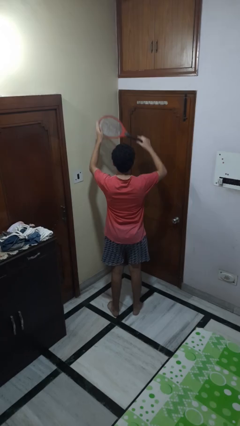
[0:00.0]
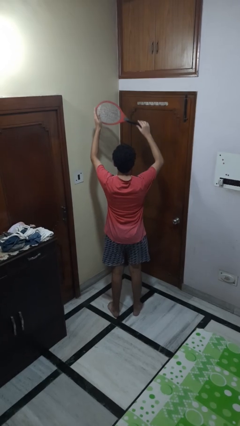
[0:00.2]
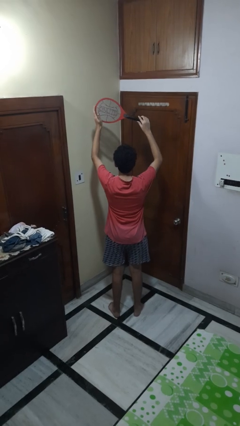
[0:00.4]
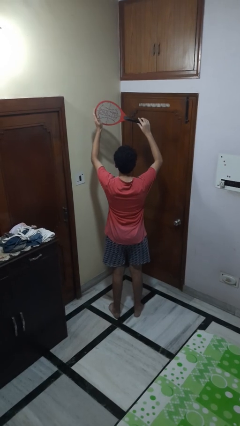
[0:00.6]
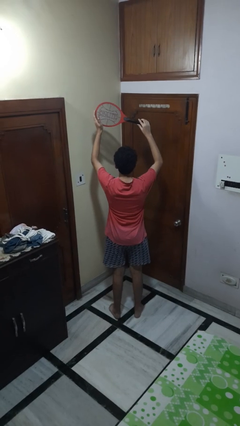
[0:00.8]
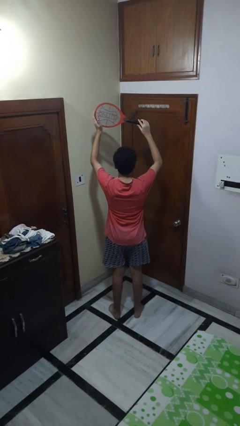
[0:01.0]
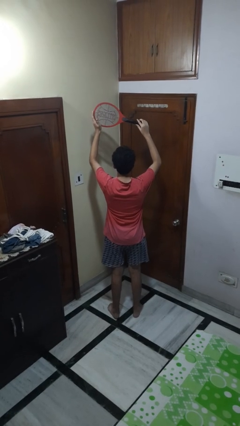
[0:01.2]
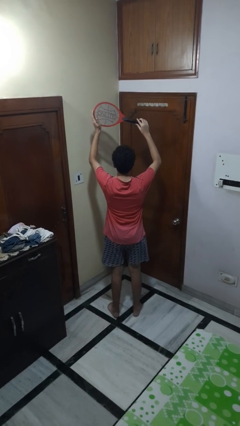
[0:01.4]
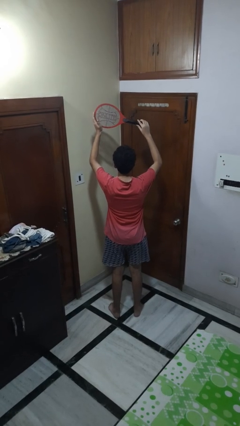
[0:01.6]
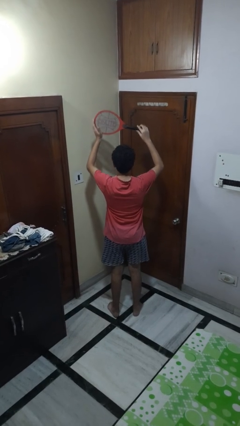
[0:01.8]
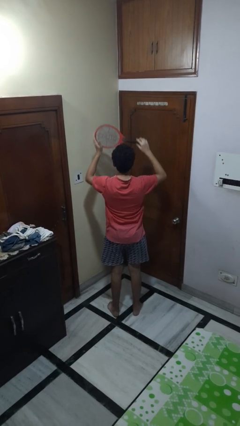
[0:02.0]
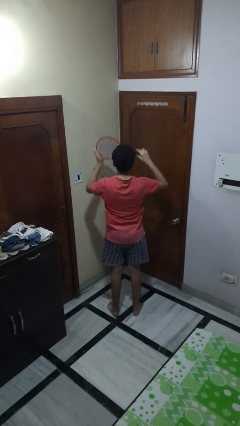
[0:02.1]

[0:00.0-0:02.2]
person holds object above head

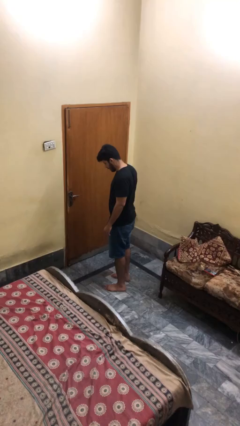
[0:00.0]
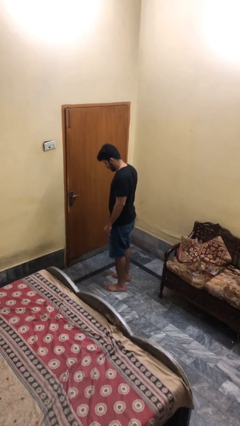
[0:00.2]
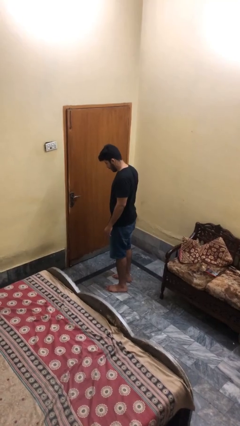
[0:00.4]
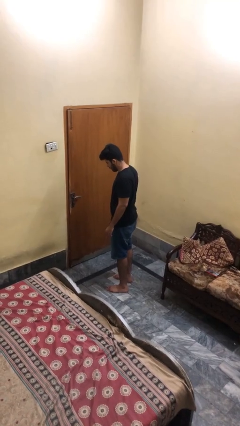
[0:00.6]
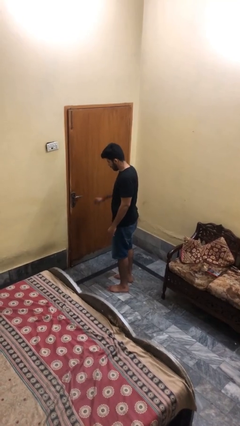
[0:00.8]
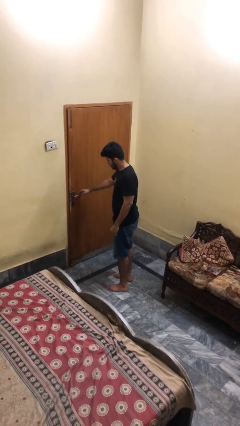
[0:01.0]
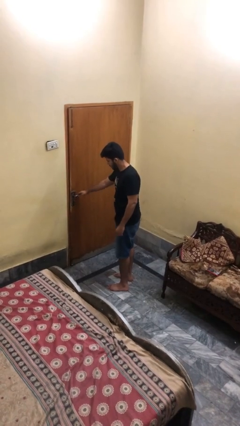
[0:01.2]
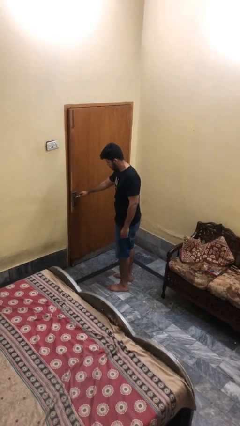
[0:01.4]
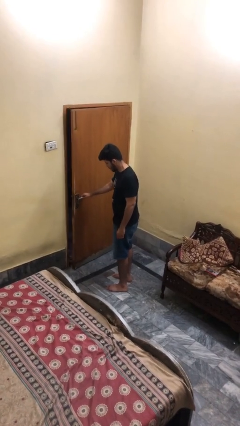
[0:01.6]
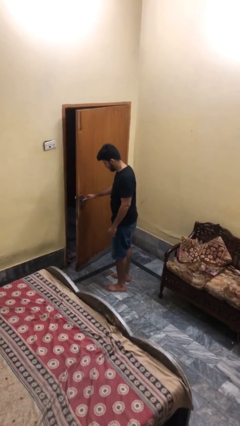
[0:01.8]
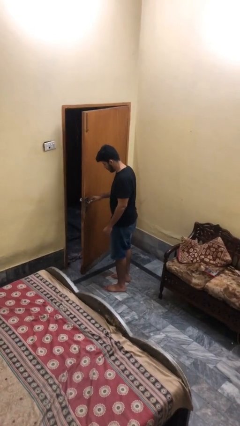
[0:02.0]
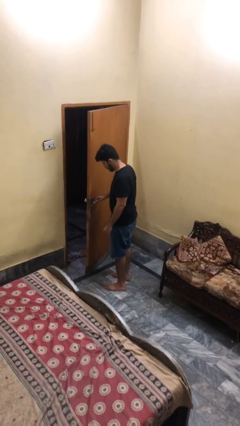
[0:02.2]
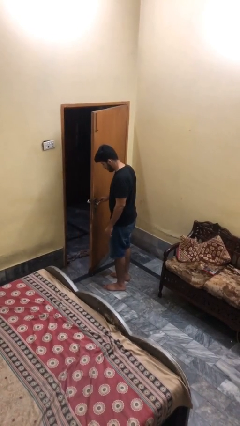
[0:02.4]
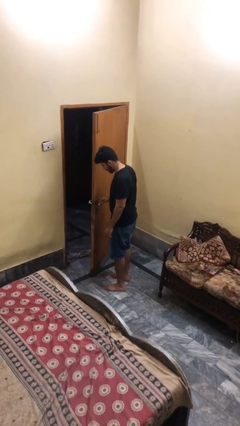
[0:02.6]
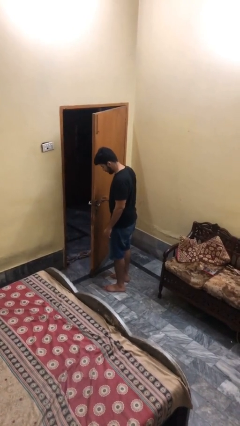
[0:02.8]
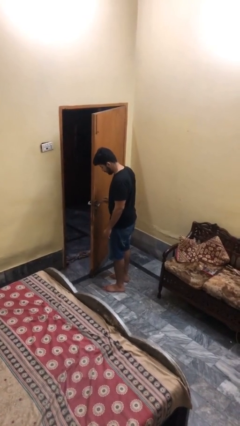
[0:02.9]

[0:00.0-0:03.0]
person opens facility door

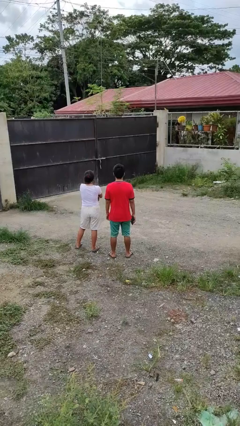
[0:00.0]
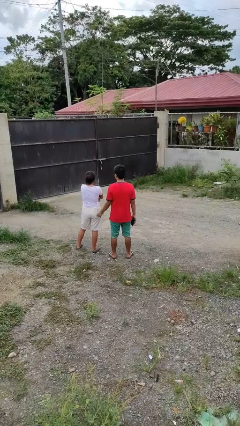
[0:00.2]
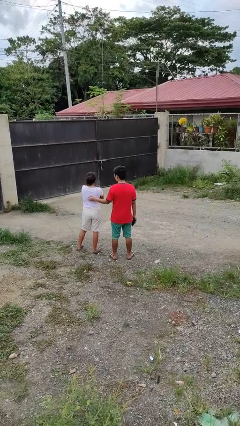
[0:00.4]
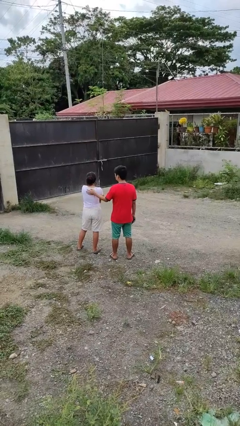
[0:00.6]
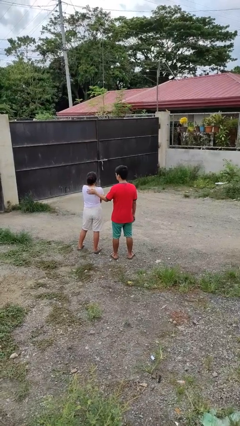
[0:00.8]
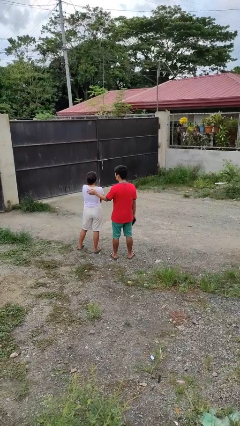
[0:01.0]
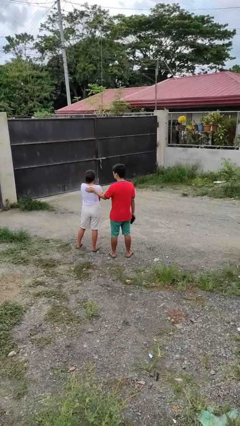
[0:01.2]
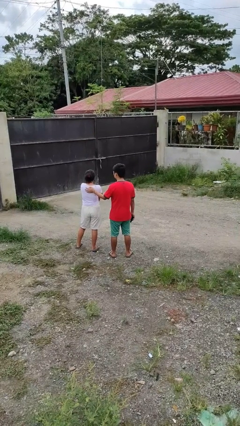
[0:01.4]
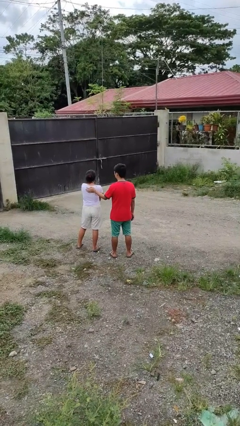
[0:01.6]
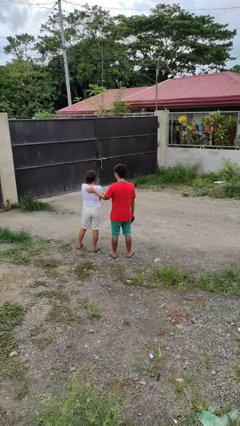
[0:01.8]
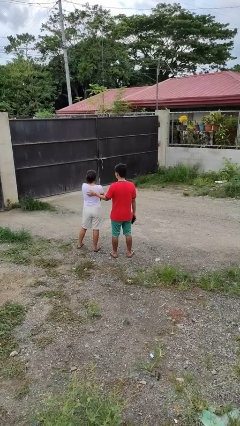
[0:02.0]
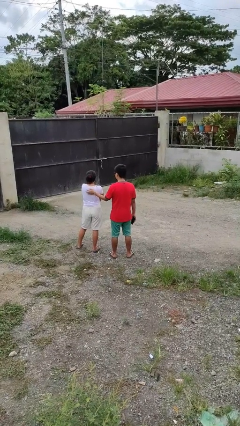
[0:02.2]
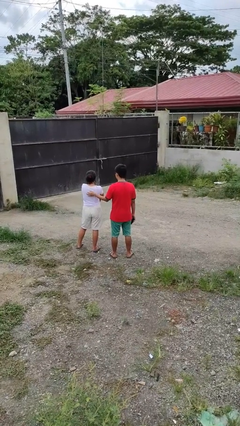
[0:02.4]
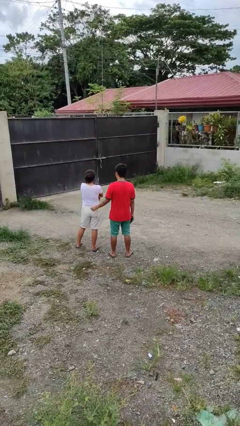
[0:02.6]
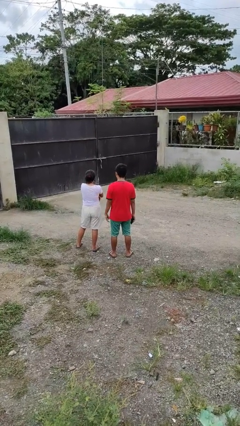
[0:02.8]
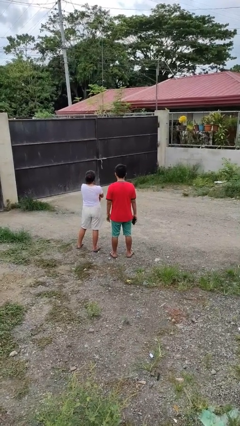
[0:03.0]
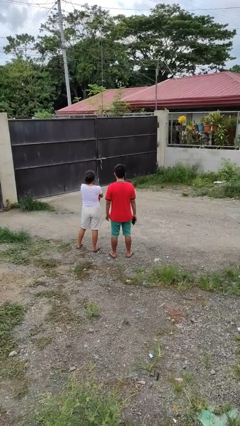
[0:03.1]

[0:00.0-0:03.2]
person touches back of person

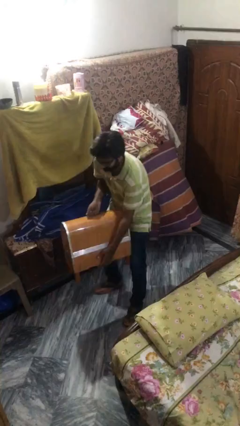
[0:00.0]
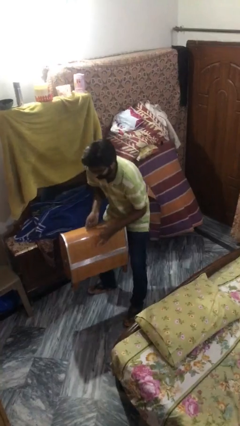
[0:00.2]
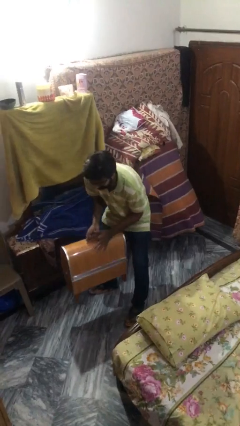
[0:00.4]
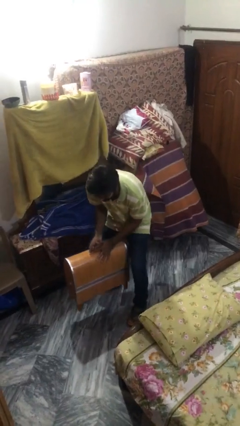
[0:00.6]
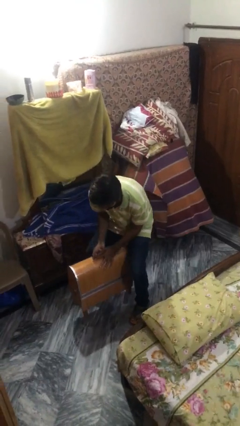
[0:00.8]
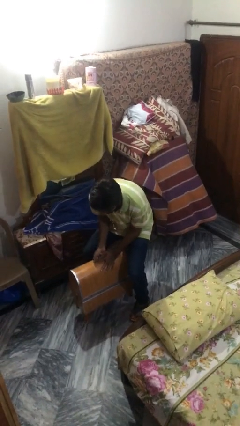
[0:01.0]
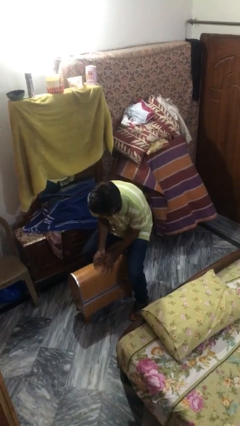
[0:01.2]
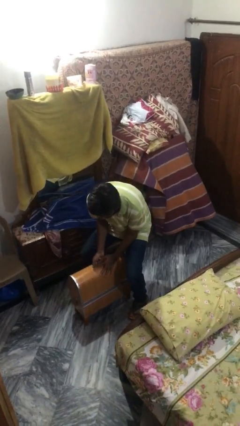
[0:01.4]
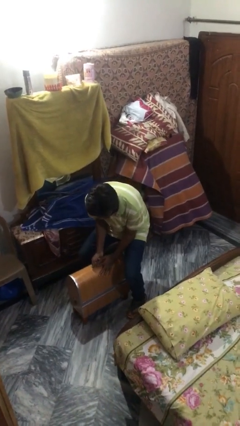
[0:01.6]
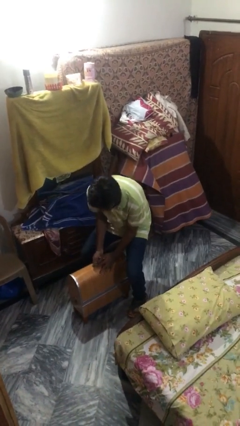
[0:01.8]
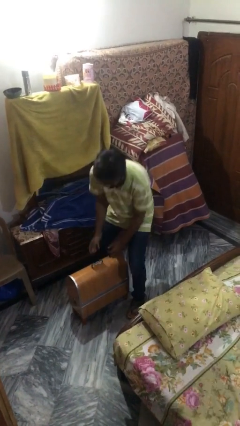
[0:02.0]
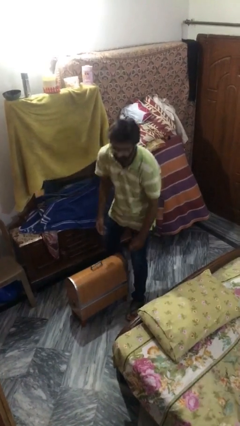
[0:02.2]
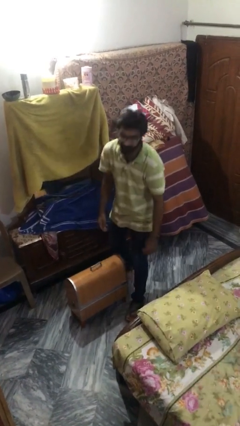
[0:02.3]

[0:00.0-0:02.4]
person puts down object on floor

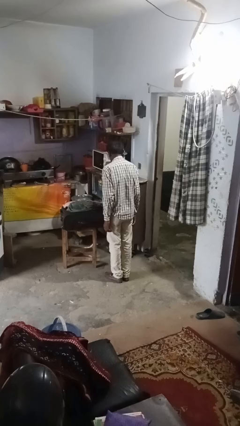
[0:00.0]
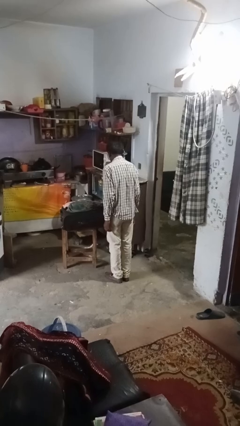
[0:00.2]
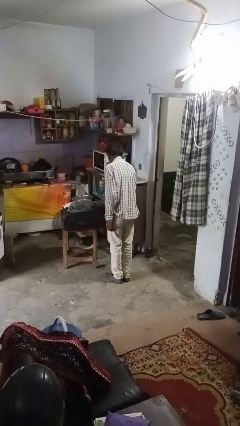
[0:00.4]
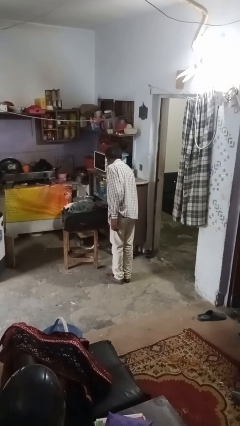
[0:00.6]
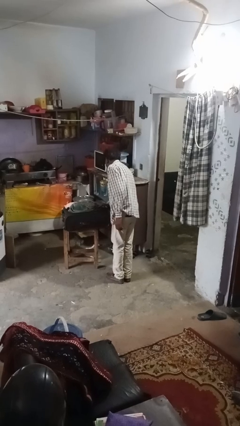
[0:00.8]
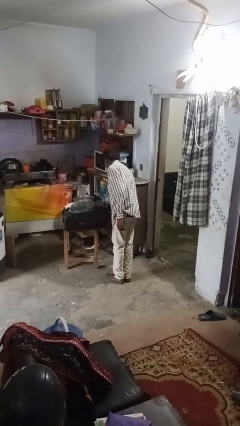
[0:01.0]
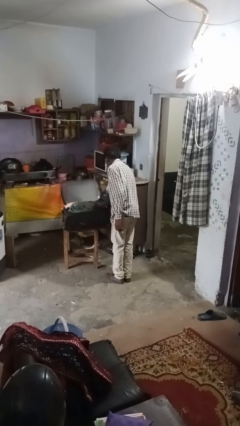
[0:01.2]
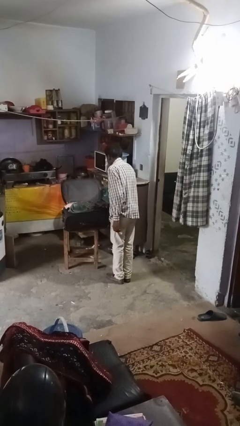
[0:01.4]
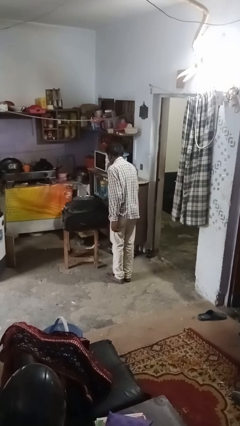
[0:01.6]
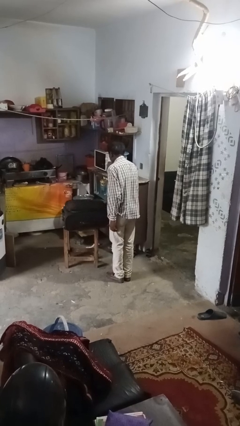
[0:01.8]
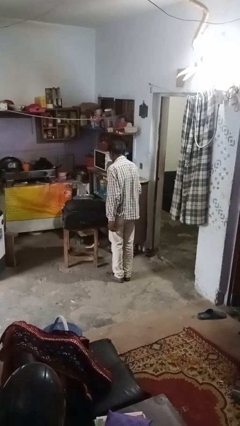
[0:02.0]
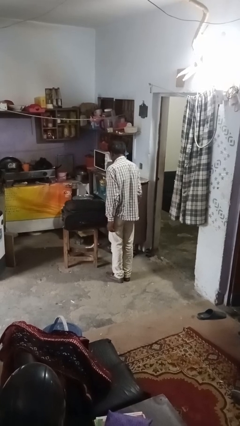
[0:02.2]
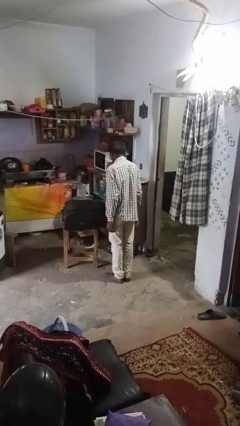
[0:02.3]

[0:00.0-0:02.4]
person closes suitcase

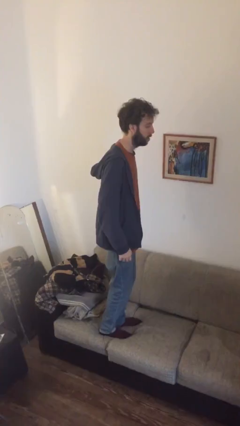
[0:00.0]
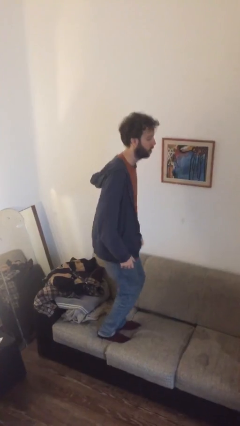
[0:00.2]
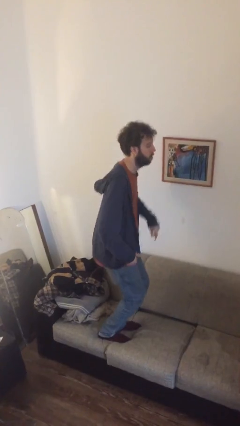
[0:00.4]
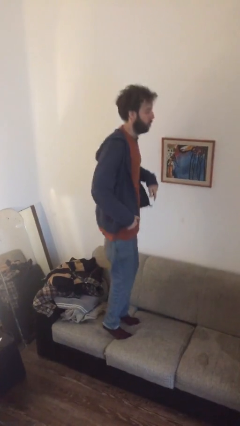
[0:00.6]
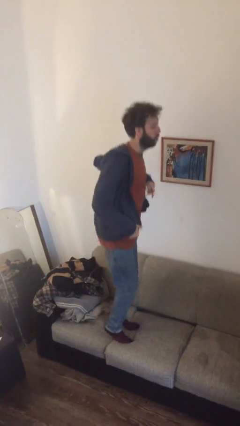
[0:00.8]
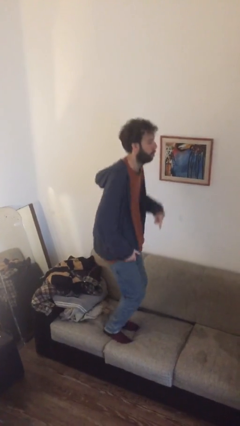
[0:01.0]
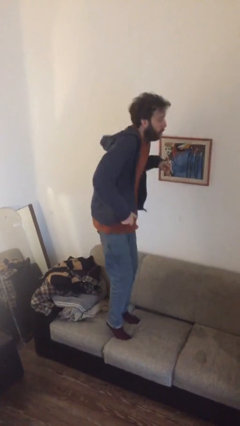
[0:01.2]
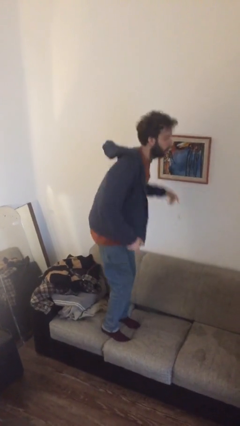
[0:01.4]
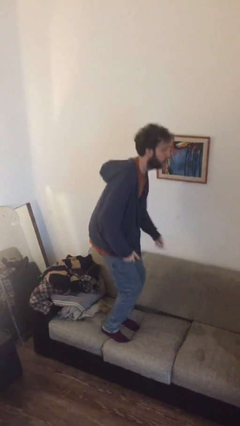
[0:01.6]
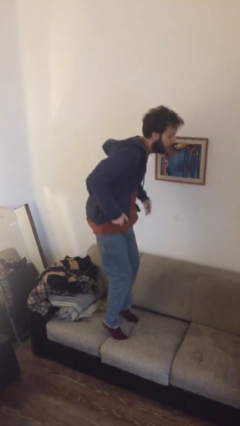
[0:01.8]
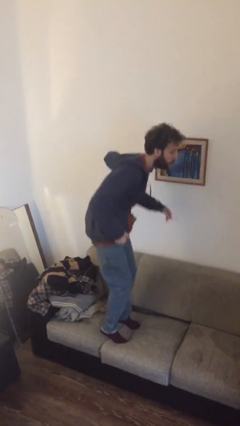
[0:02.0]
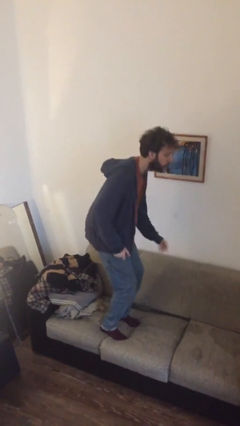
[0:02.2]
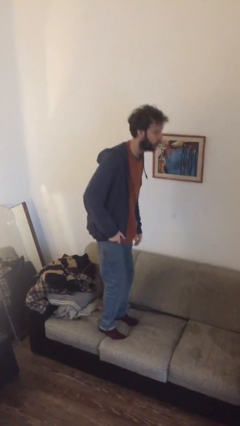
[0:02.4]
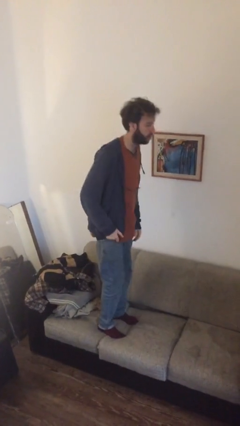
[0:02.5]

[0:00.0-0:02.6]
person jumps on couch

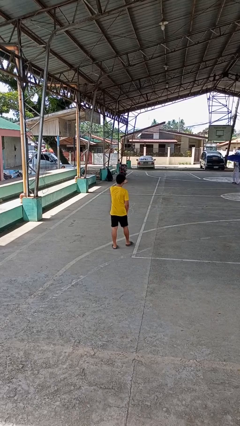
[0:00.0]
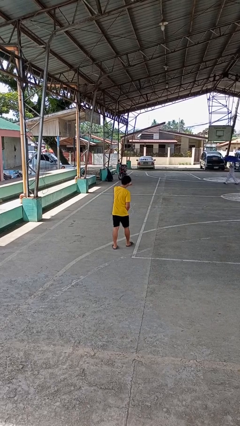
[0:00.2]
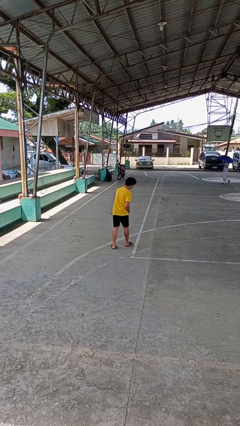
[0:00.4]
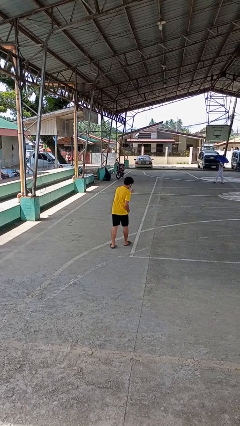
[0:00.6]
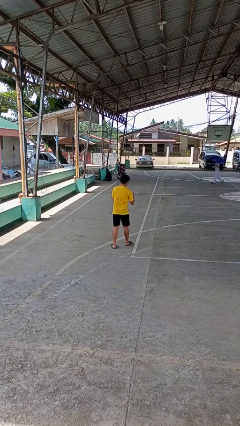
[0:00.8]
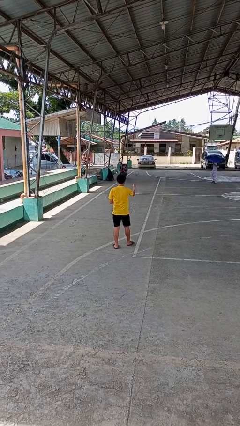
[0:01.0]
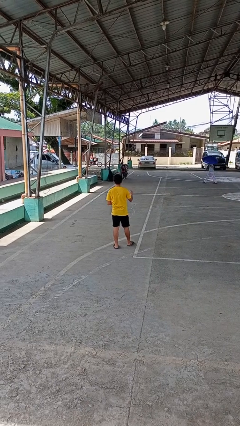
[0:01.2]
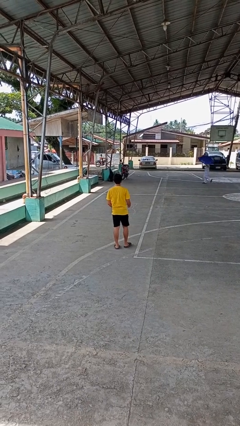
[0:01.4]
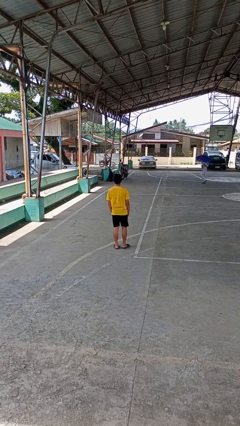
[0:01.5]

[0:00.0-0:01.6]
person punches

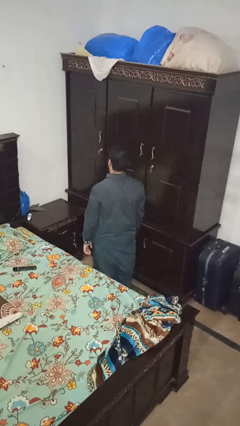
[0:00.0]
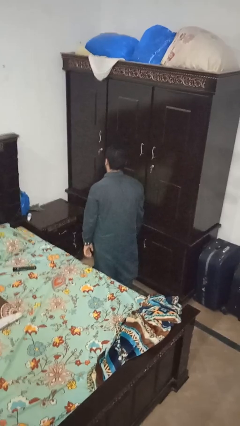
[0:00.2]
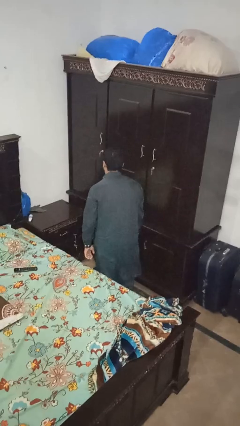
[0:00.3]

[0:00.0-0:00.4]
person searches under bed
